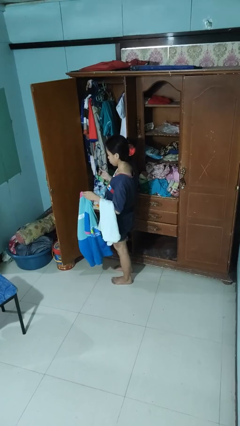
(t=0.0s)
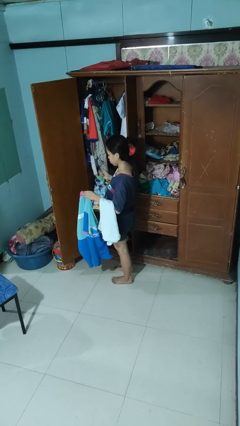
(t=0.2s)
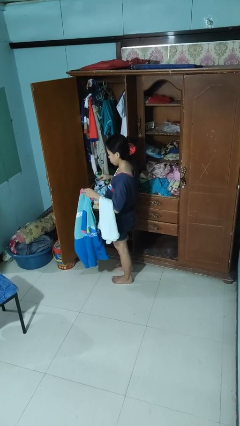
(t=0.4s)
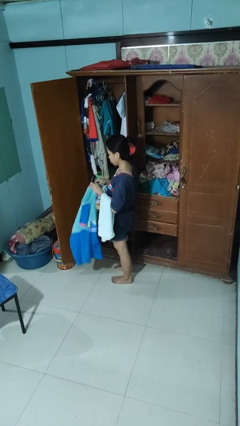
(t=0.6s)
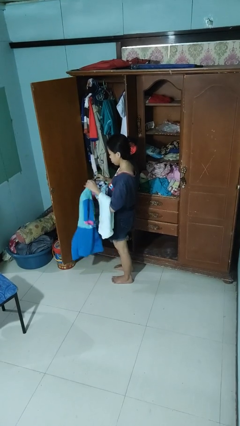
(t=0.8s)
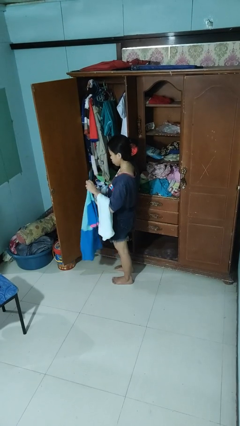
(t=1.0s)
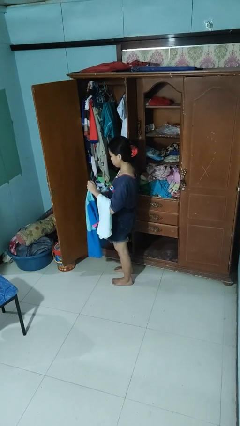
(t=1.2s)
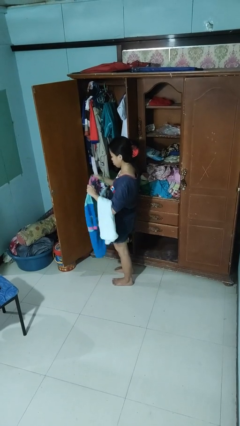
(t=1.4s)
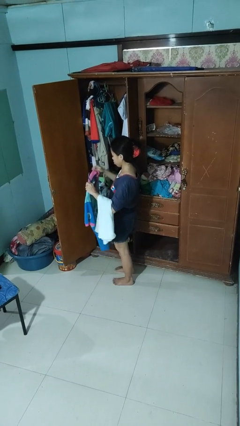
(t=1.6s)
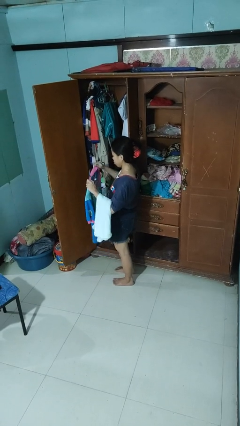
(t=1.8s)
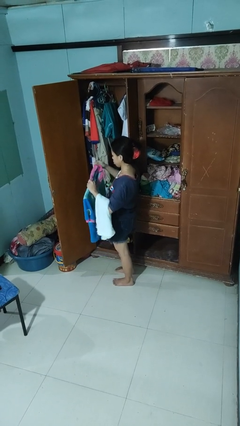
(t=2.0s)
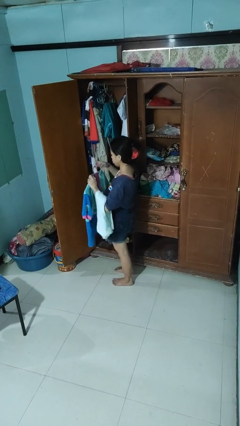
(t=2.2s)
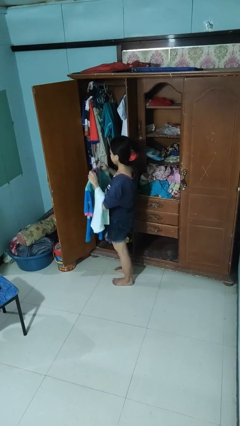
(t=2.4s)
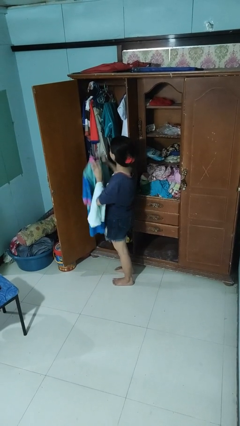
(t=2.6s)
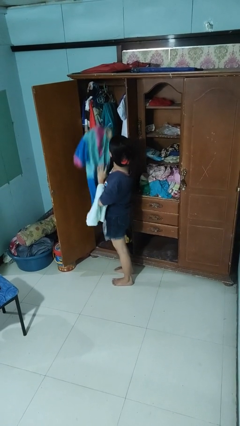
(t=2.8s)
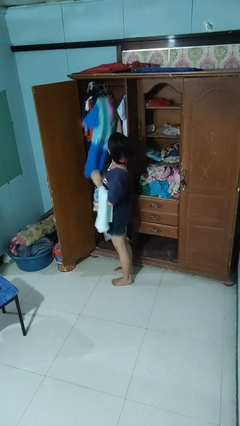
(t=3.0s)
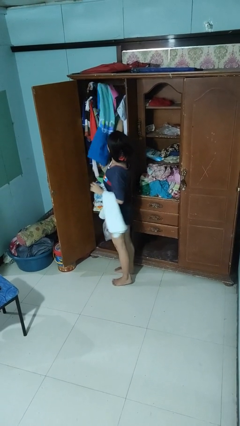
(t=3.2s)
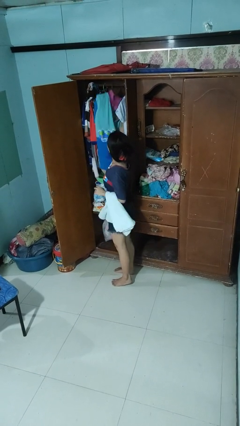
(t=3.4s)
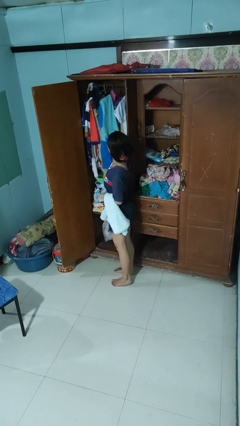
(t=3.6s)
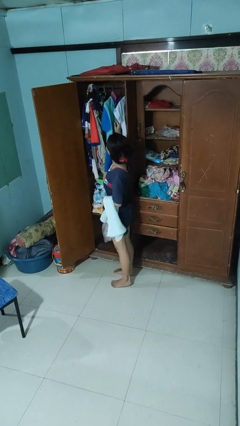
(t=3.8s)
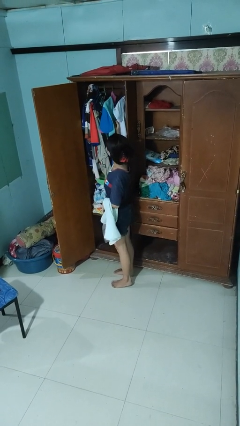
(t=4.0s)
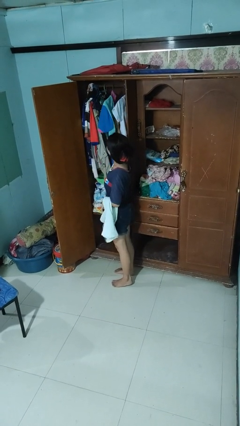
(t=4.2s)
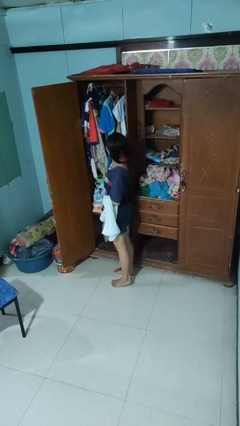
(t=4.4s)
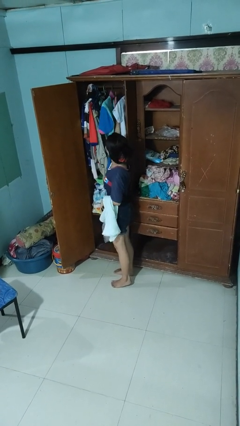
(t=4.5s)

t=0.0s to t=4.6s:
person puts clothes into closet

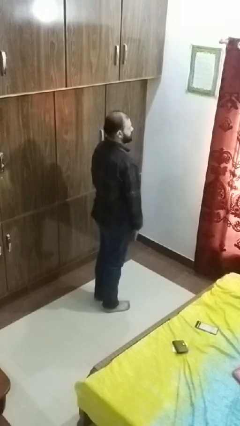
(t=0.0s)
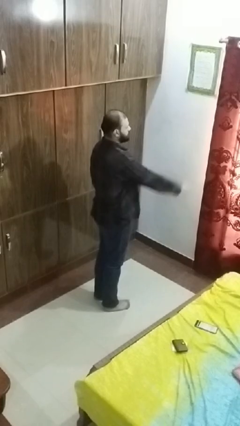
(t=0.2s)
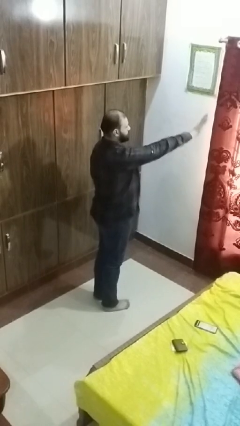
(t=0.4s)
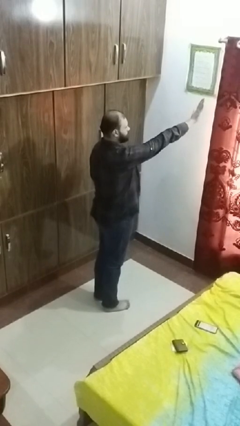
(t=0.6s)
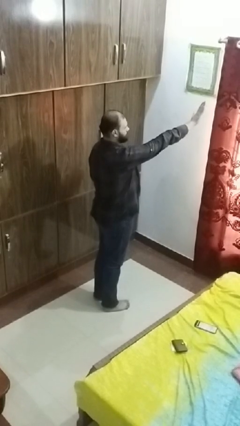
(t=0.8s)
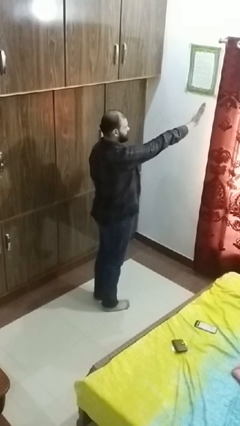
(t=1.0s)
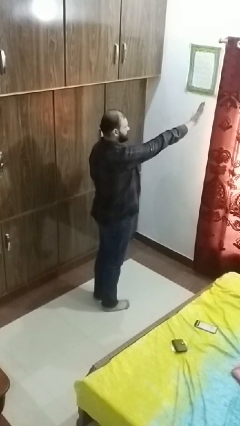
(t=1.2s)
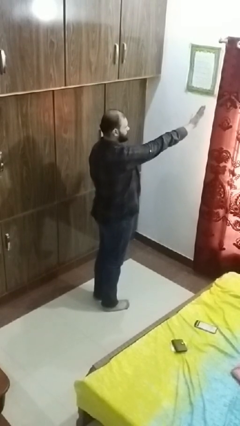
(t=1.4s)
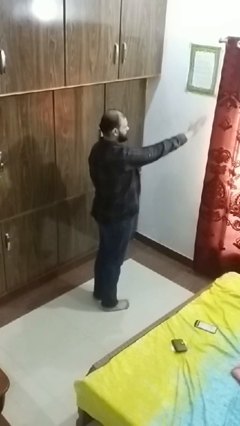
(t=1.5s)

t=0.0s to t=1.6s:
person gestures stop

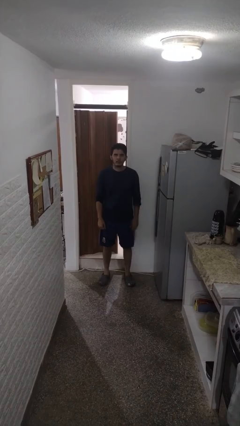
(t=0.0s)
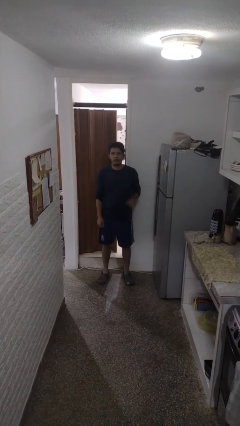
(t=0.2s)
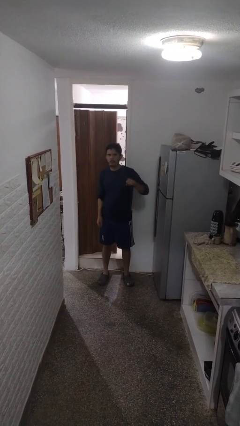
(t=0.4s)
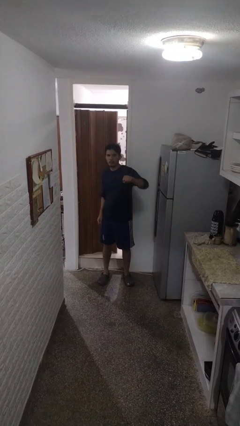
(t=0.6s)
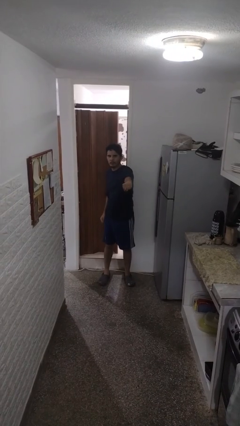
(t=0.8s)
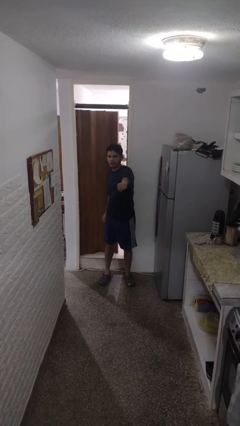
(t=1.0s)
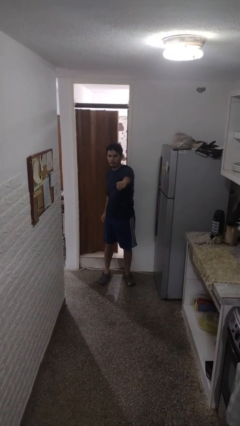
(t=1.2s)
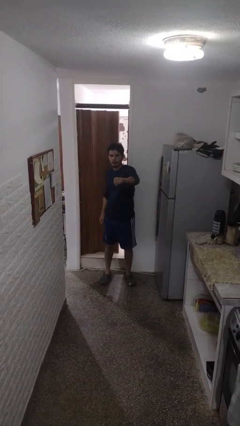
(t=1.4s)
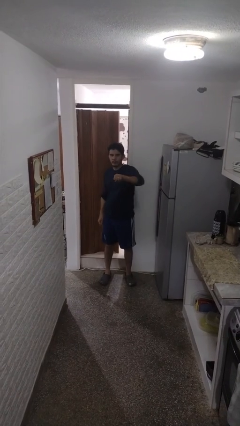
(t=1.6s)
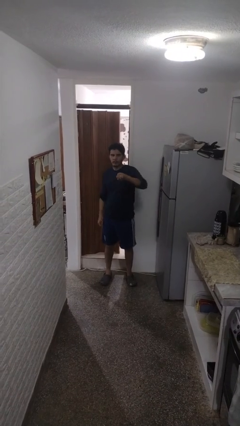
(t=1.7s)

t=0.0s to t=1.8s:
person punches

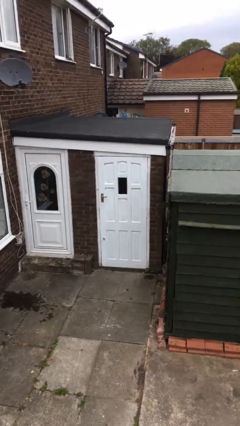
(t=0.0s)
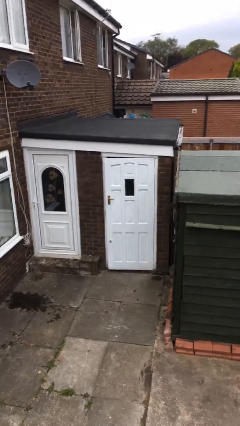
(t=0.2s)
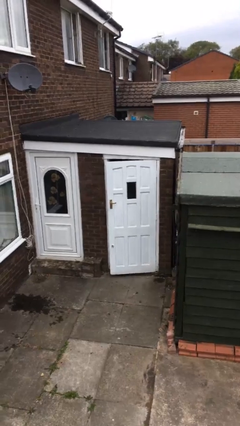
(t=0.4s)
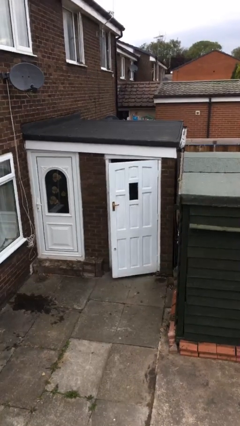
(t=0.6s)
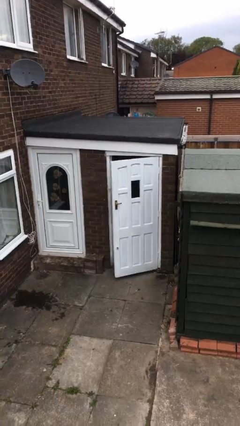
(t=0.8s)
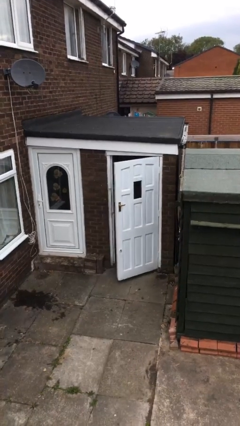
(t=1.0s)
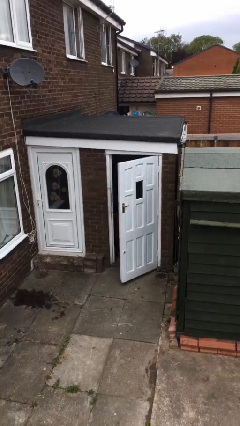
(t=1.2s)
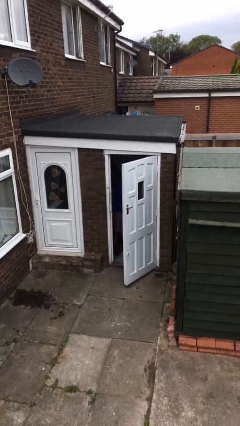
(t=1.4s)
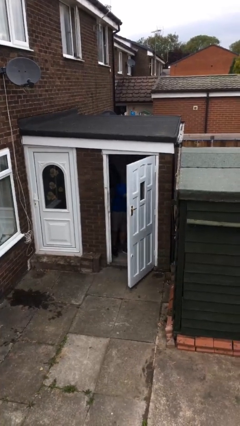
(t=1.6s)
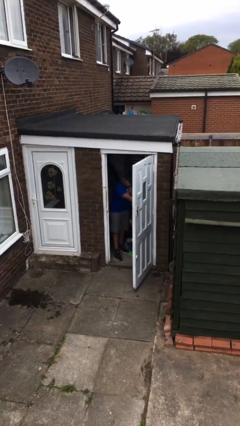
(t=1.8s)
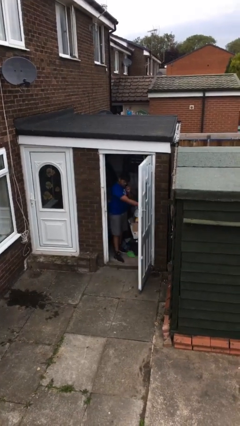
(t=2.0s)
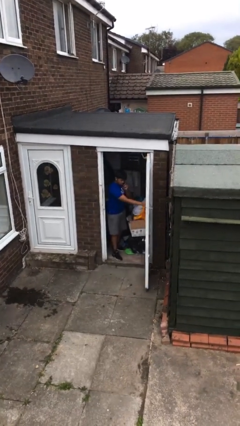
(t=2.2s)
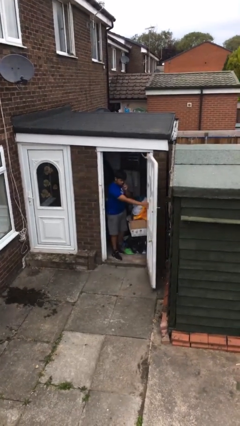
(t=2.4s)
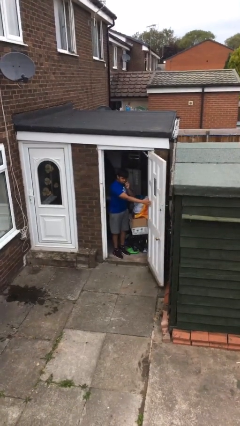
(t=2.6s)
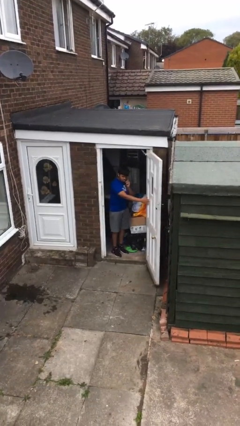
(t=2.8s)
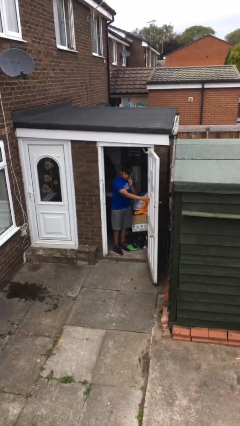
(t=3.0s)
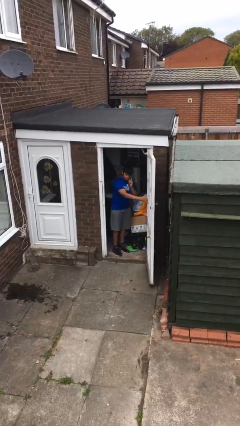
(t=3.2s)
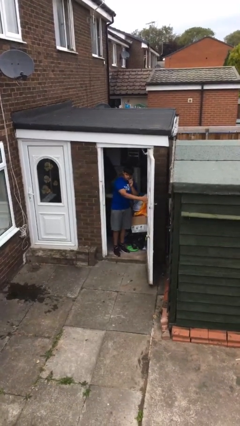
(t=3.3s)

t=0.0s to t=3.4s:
person opens facility door

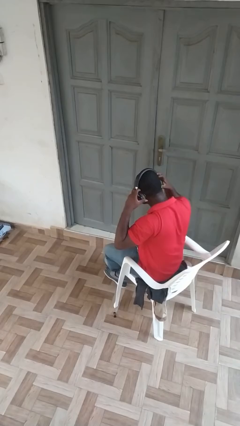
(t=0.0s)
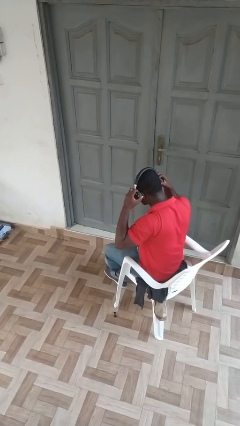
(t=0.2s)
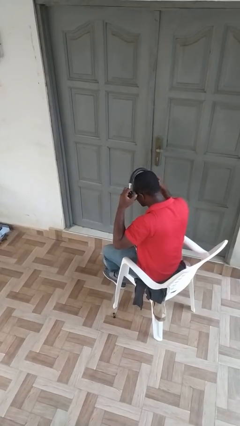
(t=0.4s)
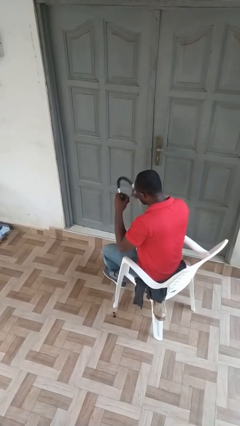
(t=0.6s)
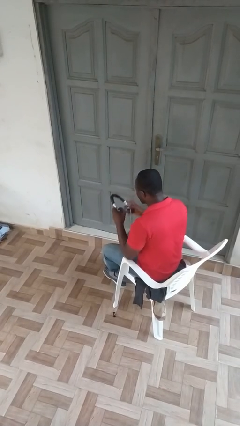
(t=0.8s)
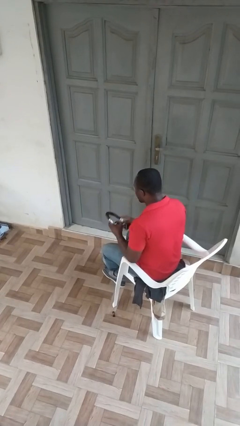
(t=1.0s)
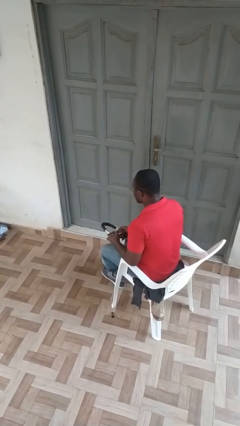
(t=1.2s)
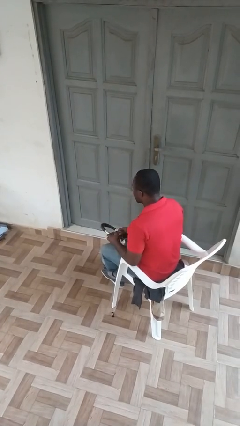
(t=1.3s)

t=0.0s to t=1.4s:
person takes off headphones

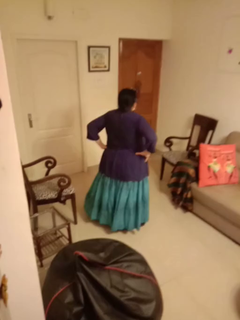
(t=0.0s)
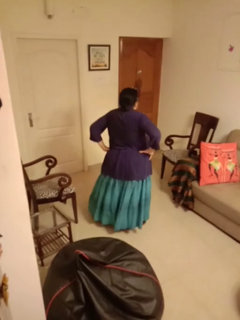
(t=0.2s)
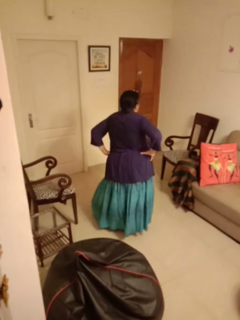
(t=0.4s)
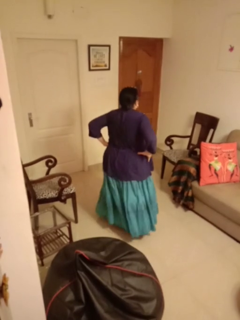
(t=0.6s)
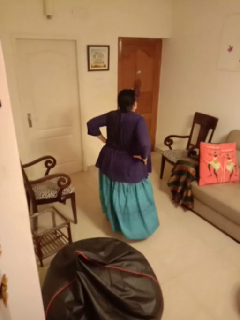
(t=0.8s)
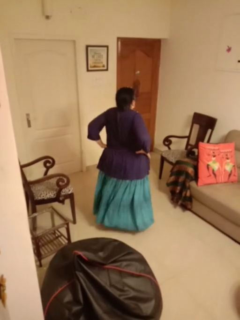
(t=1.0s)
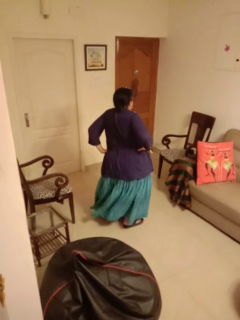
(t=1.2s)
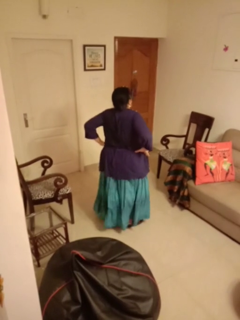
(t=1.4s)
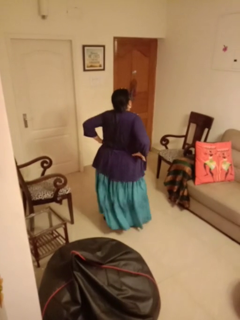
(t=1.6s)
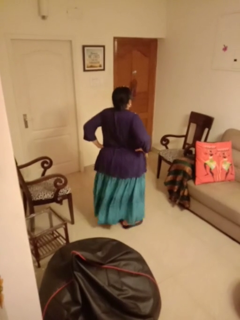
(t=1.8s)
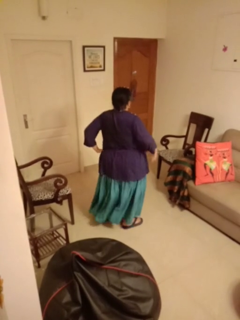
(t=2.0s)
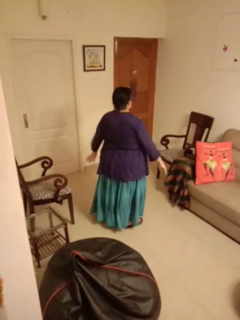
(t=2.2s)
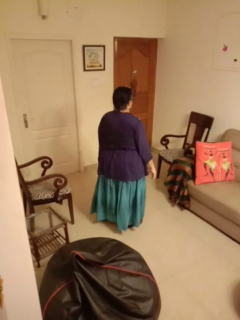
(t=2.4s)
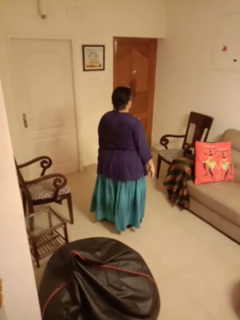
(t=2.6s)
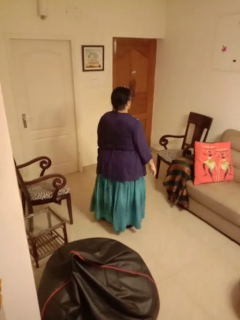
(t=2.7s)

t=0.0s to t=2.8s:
person wiggles hips

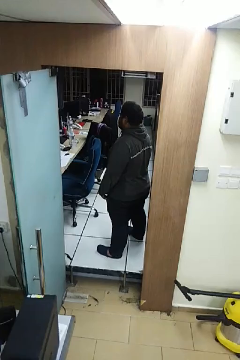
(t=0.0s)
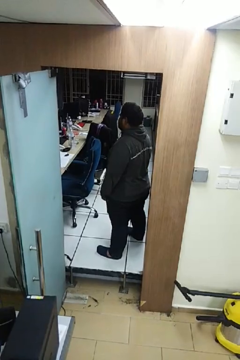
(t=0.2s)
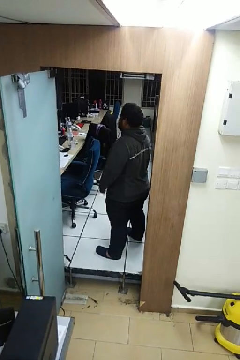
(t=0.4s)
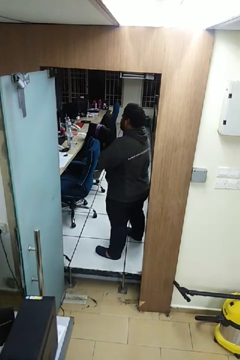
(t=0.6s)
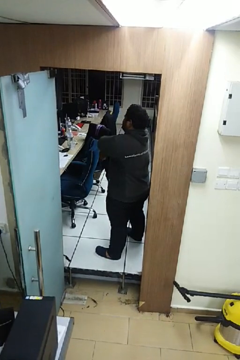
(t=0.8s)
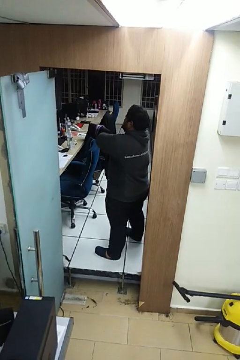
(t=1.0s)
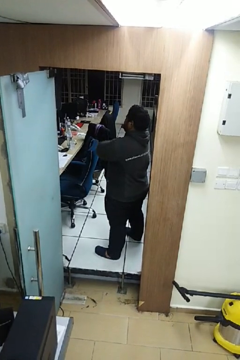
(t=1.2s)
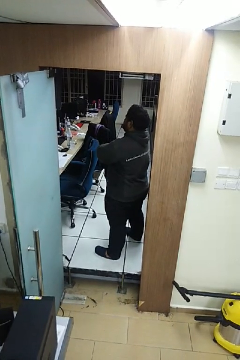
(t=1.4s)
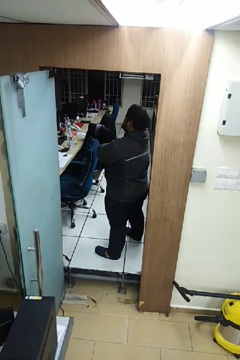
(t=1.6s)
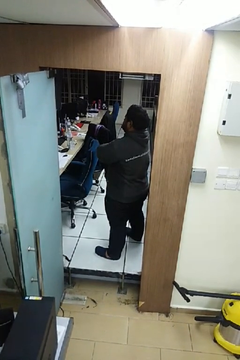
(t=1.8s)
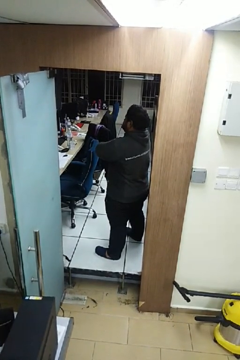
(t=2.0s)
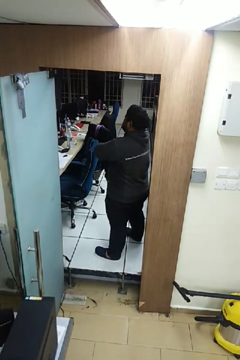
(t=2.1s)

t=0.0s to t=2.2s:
person crosses arms

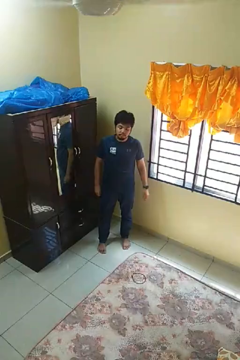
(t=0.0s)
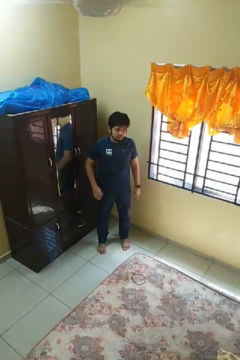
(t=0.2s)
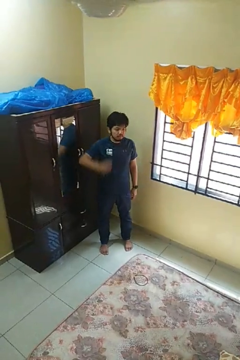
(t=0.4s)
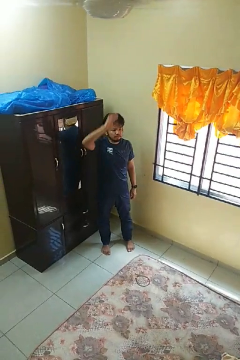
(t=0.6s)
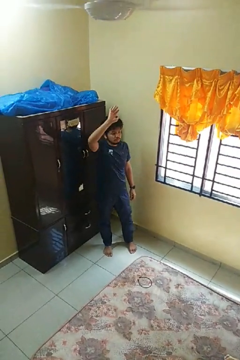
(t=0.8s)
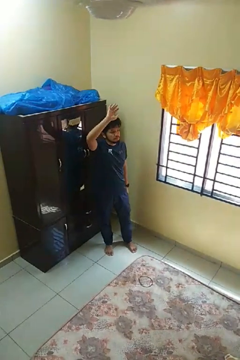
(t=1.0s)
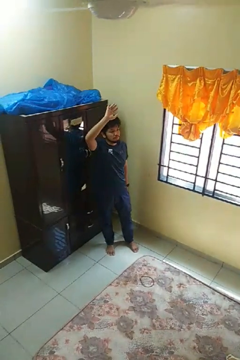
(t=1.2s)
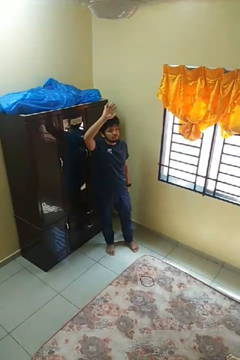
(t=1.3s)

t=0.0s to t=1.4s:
person gestures raise hand
